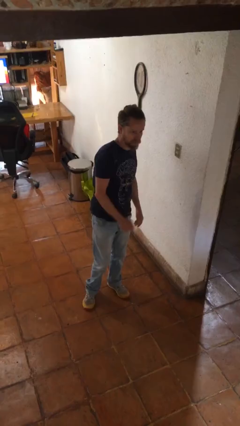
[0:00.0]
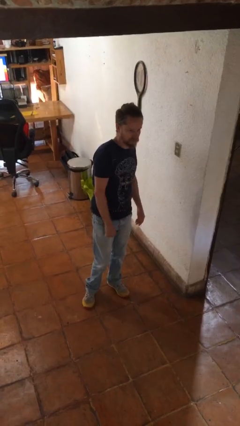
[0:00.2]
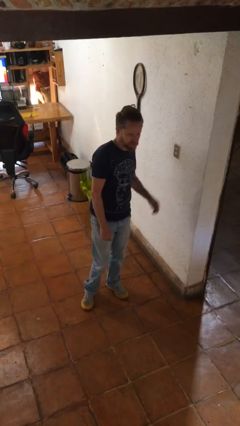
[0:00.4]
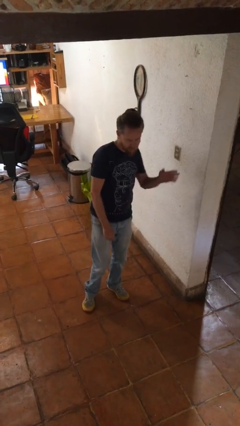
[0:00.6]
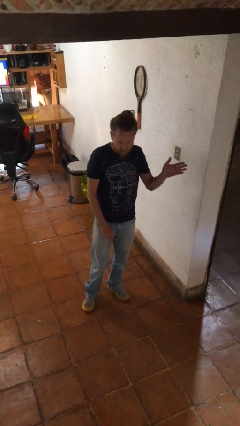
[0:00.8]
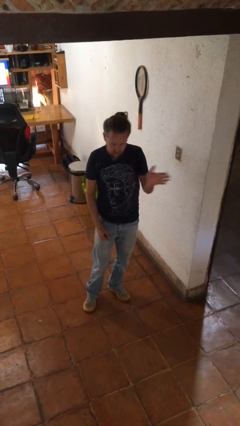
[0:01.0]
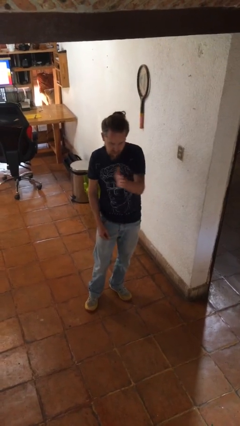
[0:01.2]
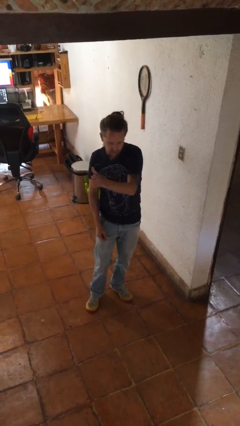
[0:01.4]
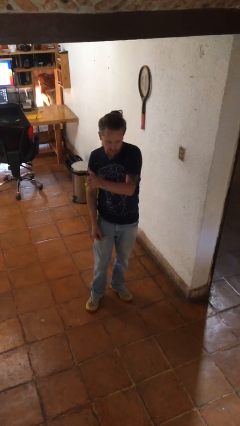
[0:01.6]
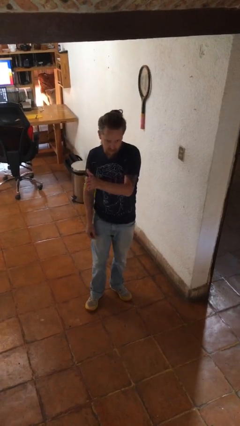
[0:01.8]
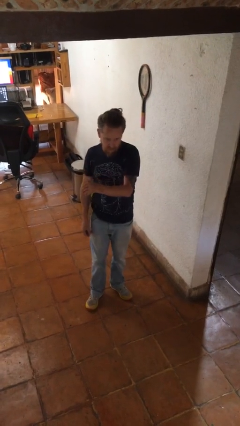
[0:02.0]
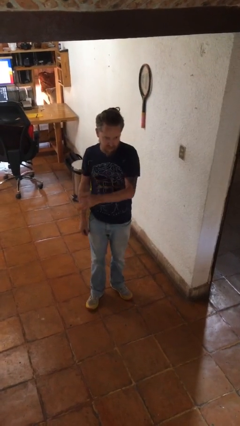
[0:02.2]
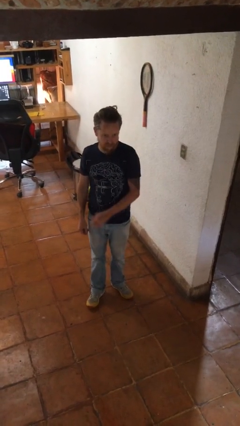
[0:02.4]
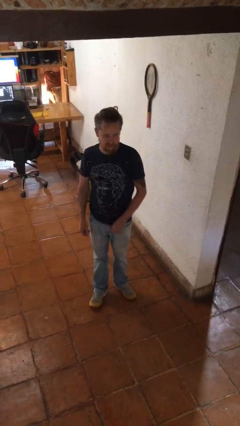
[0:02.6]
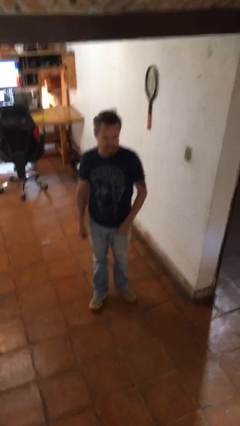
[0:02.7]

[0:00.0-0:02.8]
person gestures swipe right

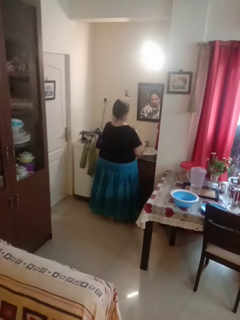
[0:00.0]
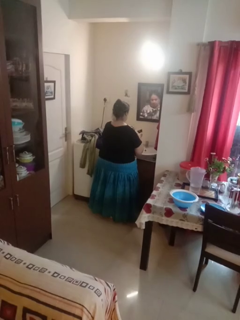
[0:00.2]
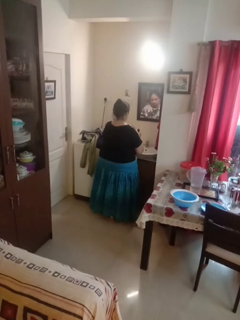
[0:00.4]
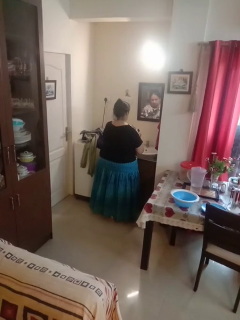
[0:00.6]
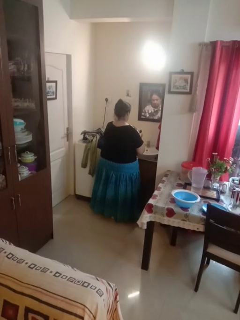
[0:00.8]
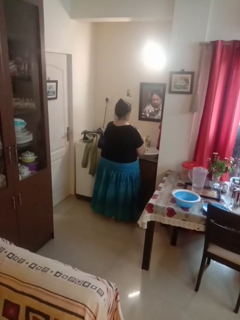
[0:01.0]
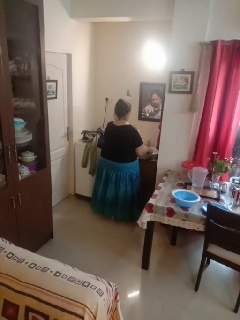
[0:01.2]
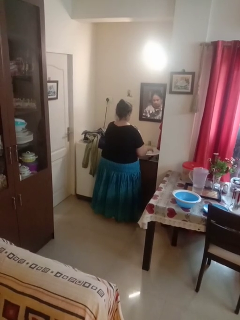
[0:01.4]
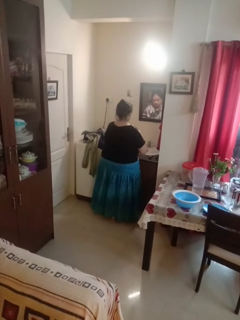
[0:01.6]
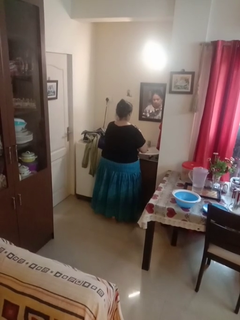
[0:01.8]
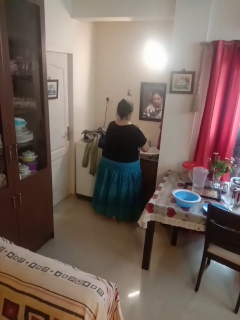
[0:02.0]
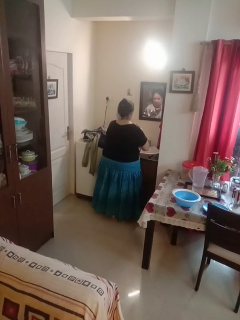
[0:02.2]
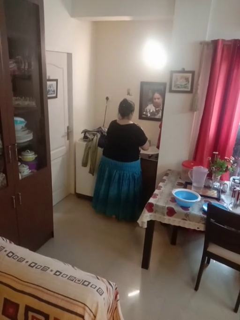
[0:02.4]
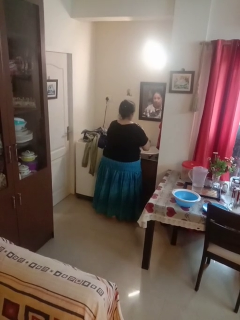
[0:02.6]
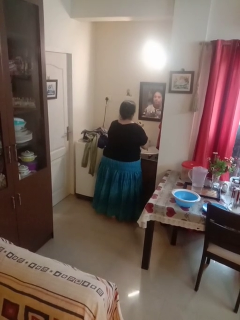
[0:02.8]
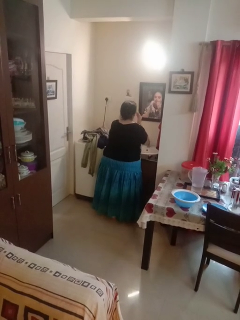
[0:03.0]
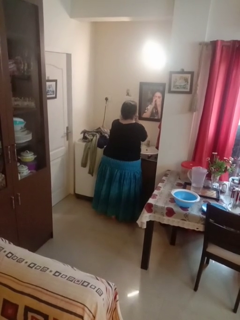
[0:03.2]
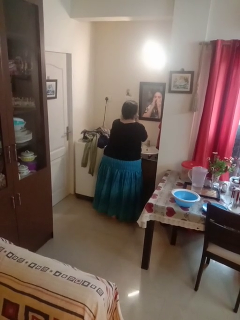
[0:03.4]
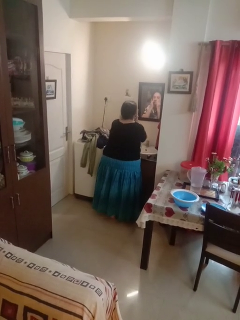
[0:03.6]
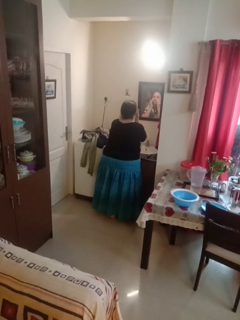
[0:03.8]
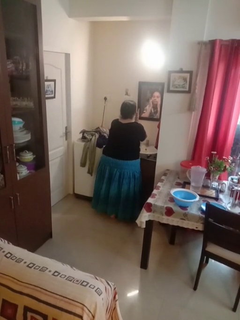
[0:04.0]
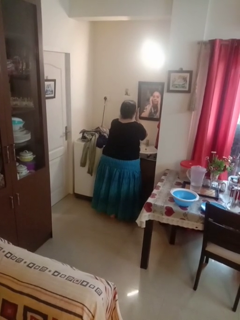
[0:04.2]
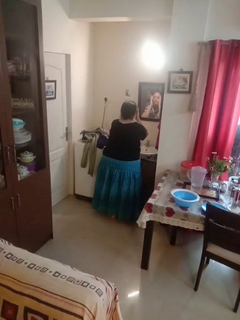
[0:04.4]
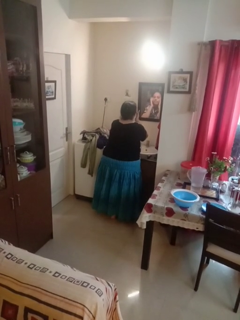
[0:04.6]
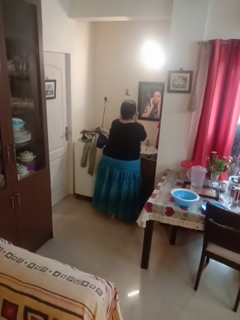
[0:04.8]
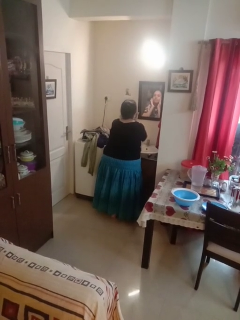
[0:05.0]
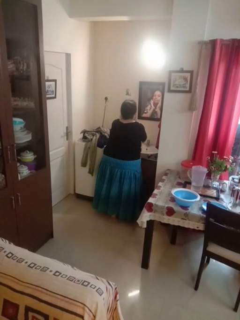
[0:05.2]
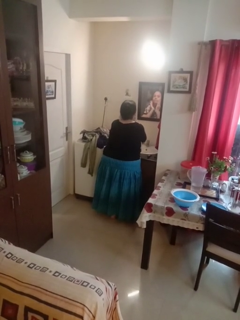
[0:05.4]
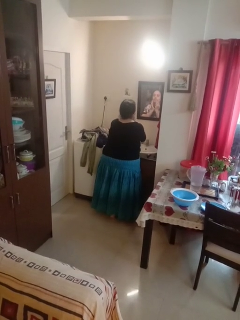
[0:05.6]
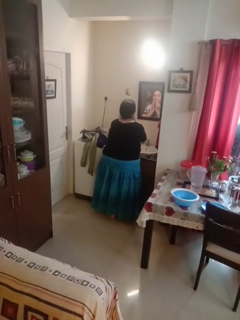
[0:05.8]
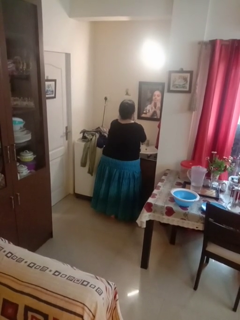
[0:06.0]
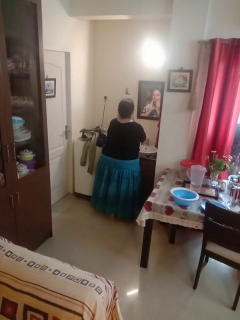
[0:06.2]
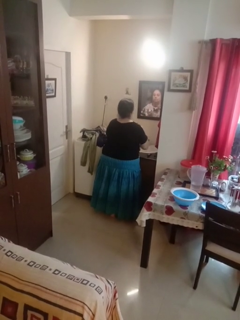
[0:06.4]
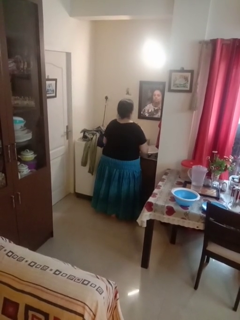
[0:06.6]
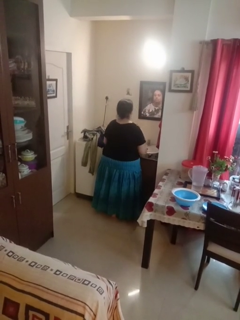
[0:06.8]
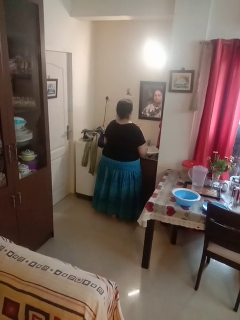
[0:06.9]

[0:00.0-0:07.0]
person applies foundation makeup

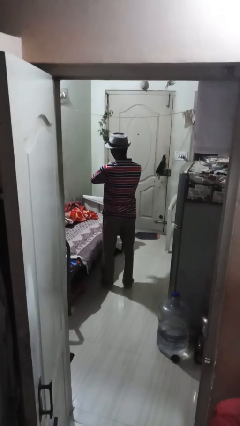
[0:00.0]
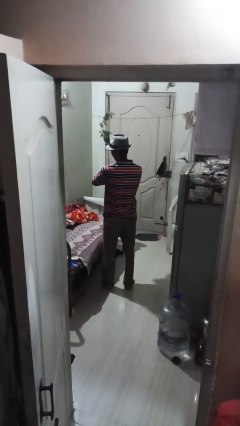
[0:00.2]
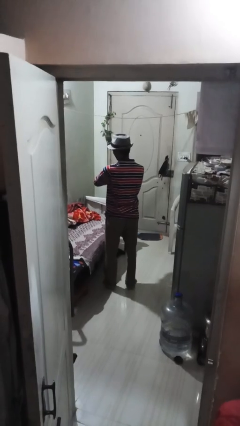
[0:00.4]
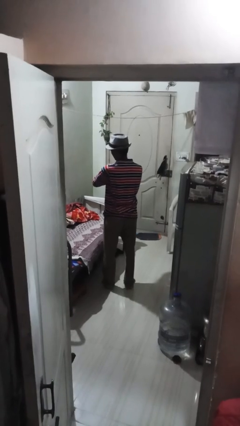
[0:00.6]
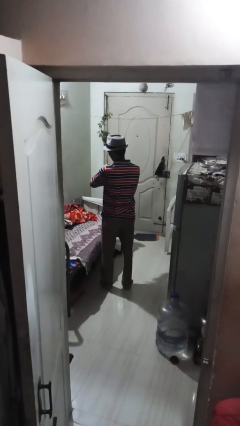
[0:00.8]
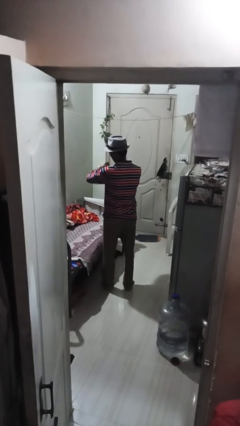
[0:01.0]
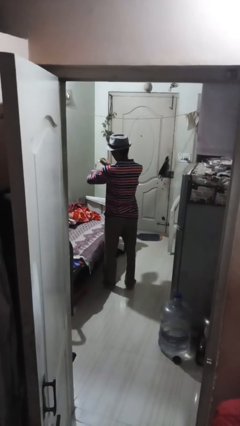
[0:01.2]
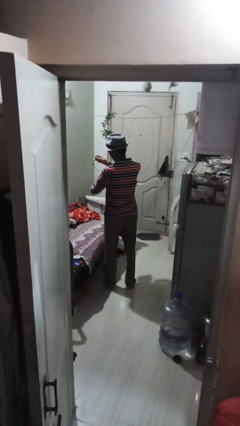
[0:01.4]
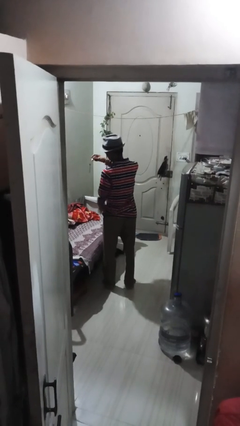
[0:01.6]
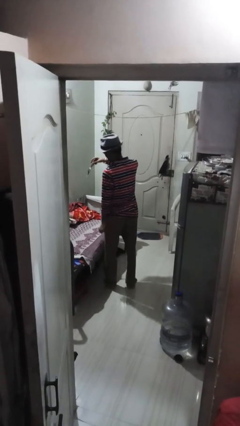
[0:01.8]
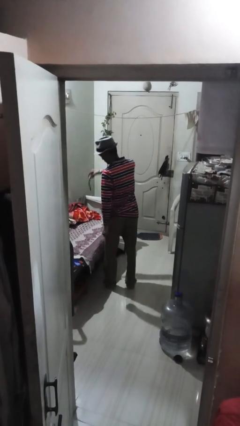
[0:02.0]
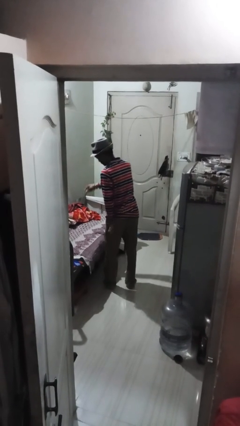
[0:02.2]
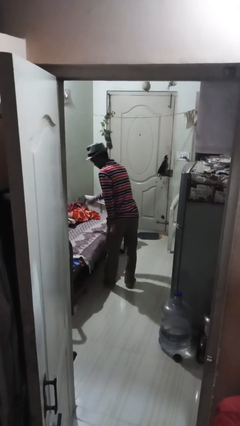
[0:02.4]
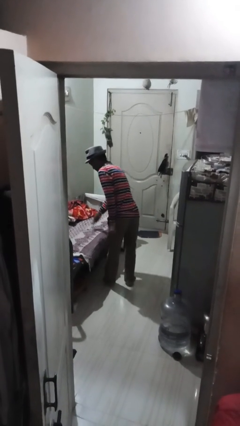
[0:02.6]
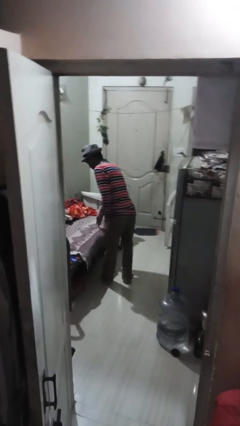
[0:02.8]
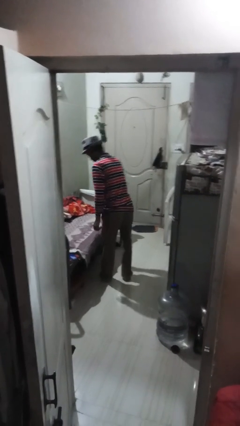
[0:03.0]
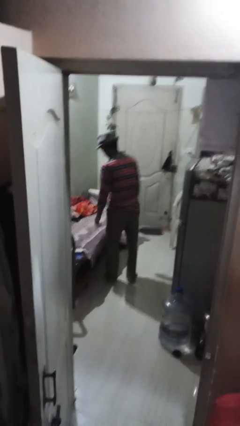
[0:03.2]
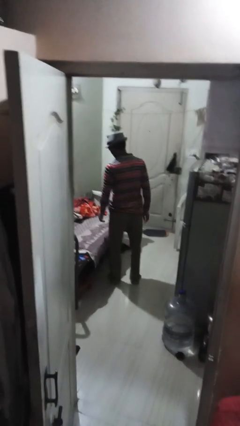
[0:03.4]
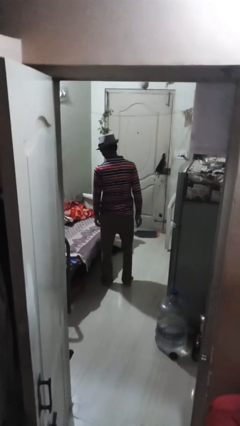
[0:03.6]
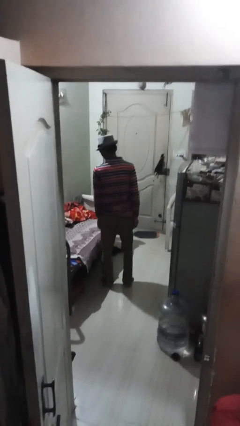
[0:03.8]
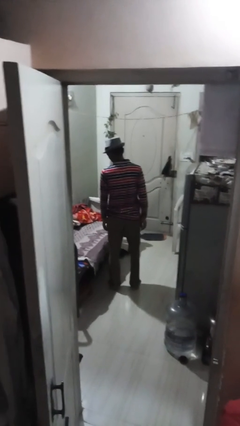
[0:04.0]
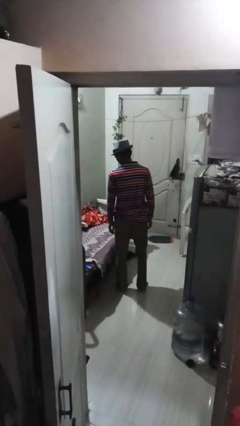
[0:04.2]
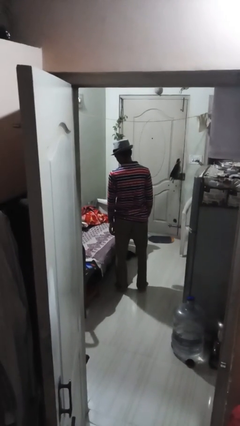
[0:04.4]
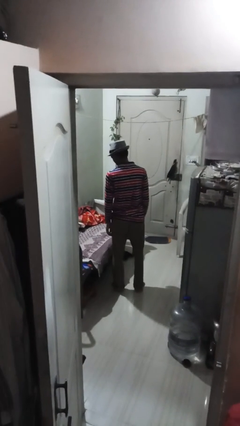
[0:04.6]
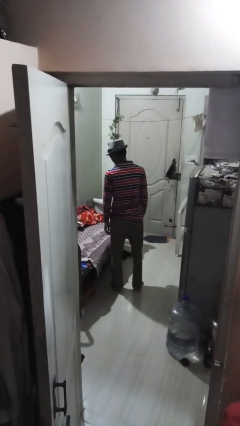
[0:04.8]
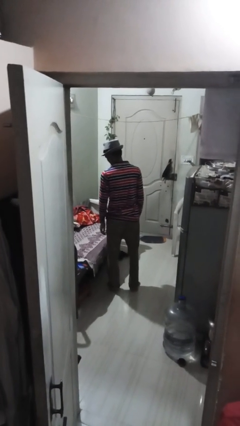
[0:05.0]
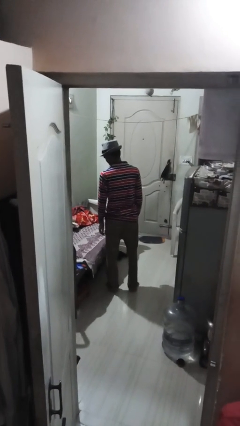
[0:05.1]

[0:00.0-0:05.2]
person takes off wristwatch

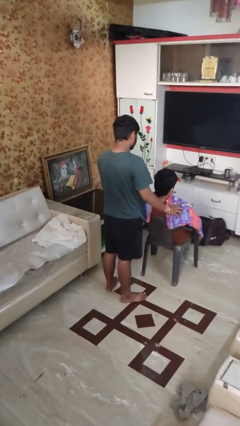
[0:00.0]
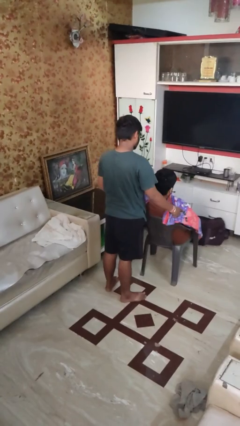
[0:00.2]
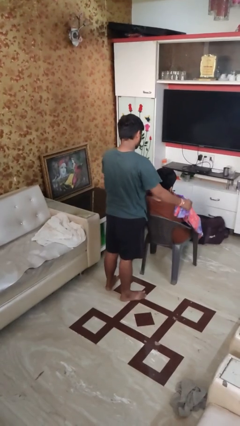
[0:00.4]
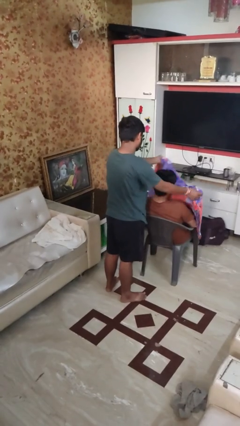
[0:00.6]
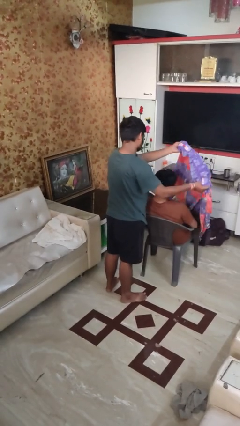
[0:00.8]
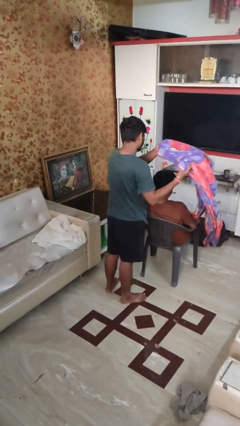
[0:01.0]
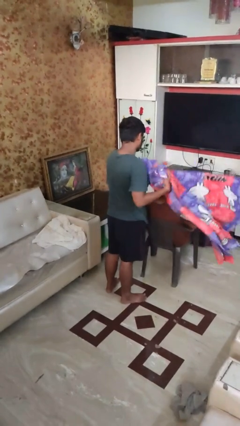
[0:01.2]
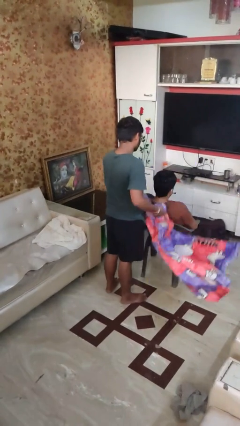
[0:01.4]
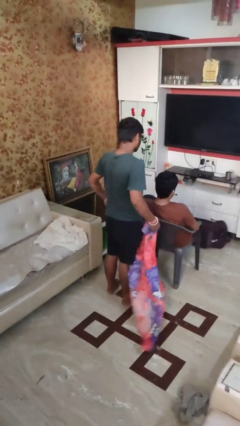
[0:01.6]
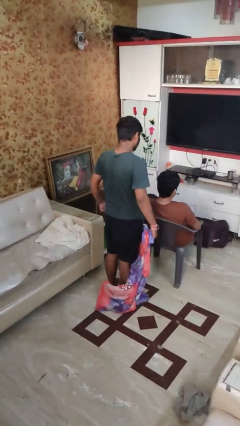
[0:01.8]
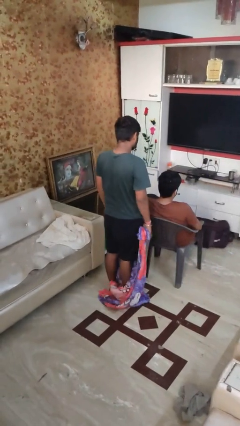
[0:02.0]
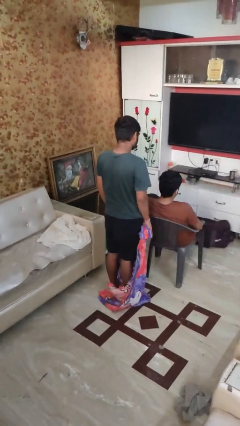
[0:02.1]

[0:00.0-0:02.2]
person uncovers friend with blanket

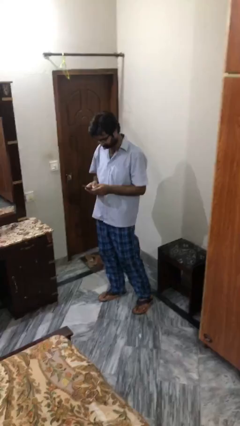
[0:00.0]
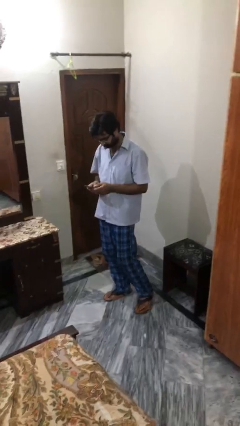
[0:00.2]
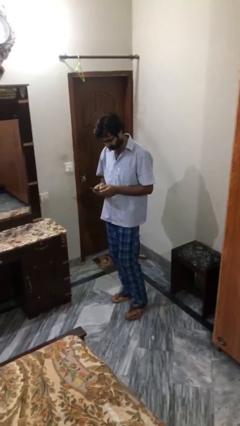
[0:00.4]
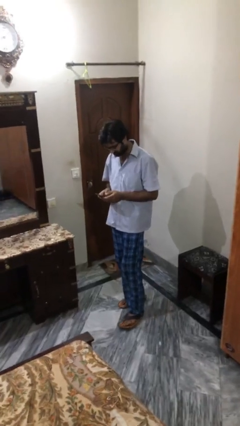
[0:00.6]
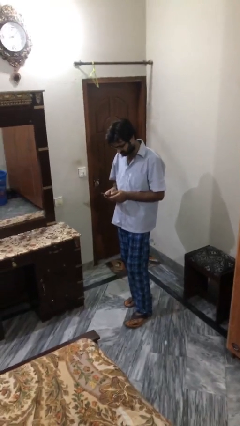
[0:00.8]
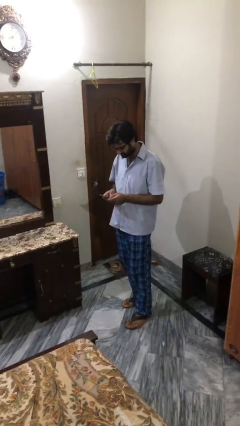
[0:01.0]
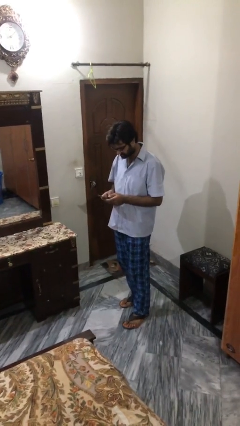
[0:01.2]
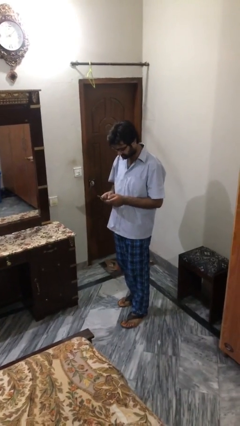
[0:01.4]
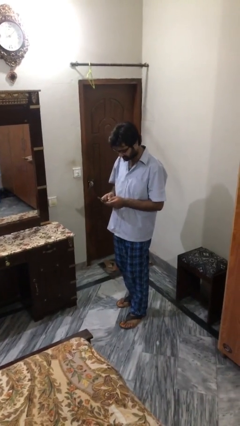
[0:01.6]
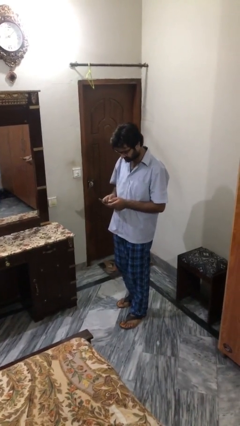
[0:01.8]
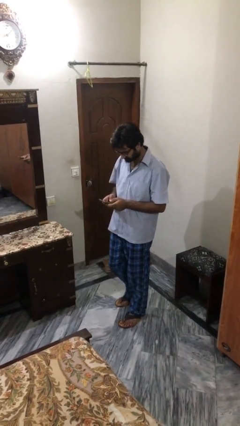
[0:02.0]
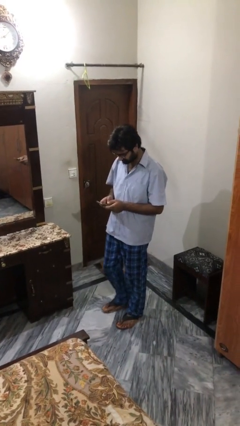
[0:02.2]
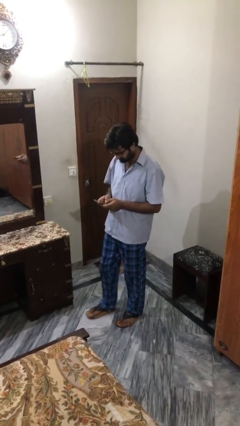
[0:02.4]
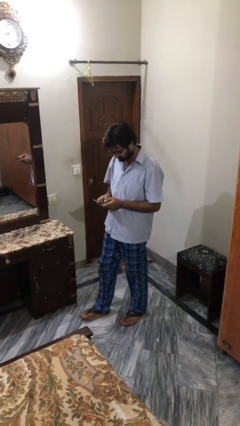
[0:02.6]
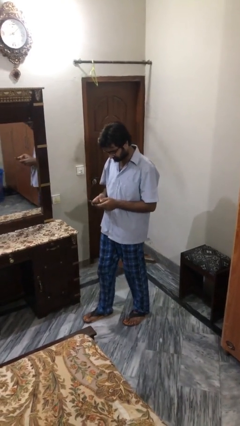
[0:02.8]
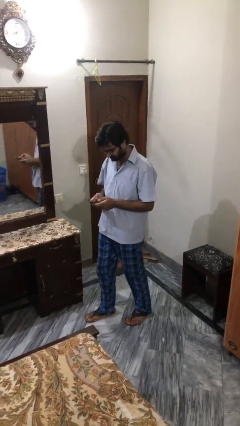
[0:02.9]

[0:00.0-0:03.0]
person texts on phone
